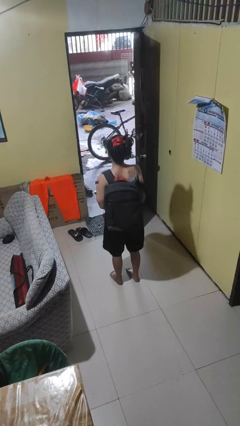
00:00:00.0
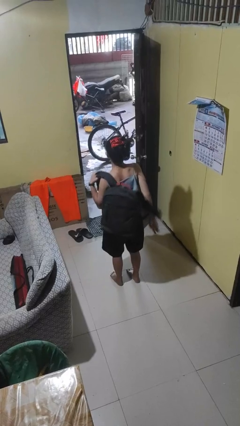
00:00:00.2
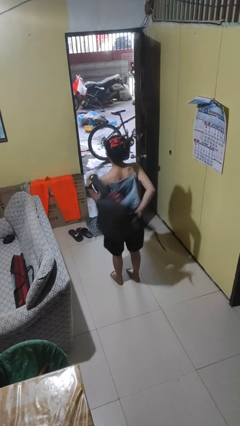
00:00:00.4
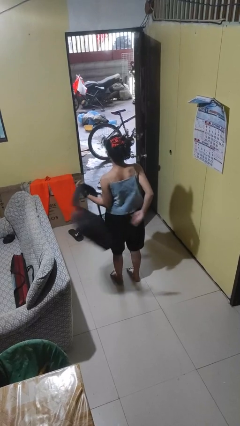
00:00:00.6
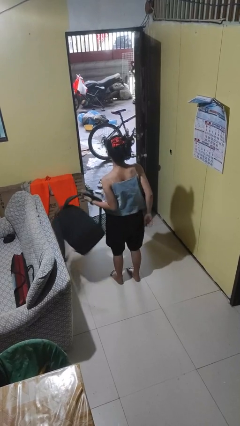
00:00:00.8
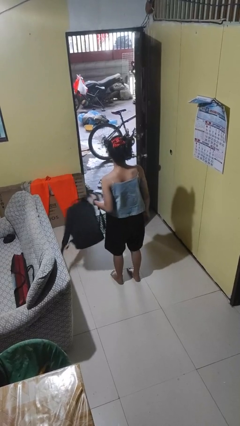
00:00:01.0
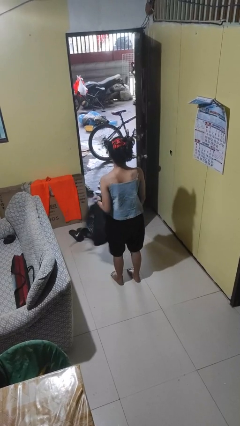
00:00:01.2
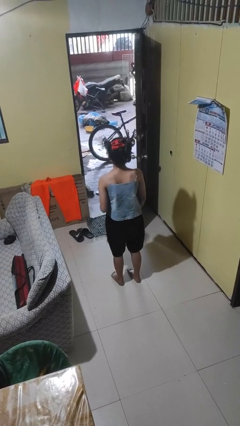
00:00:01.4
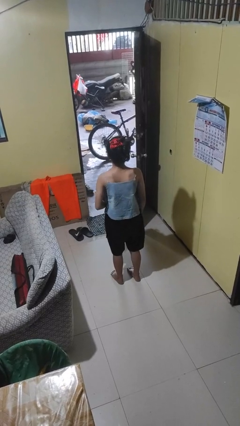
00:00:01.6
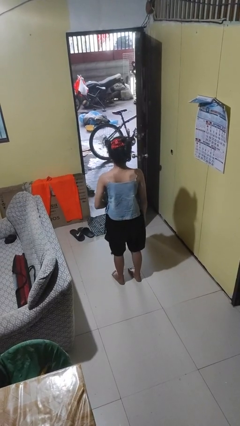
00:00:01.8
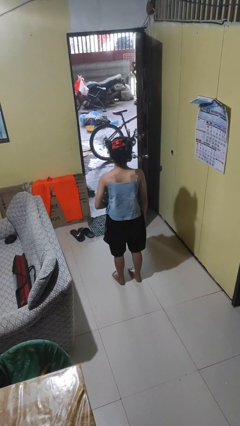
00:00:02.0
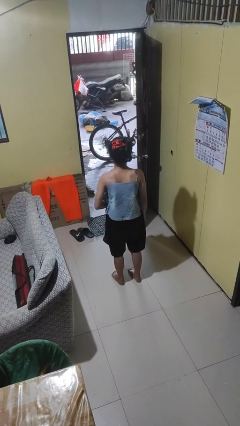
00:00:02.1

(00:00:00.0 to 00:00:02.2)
person takes off backpack

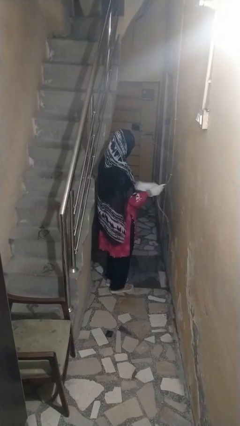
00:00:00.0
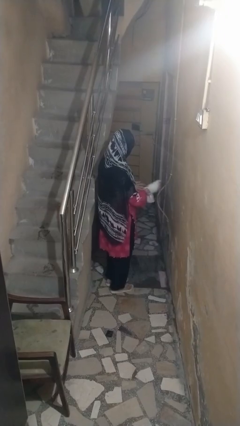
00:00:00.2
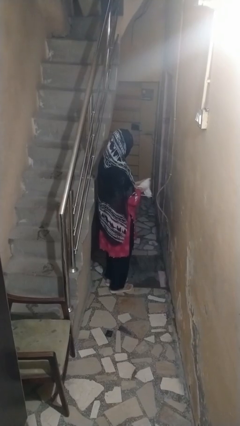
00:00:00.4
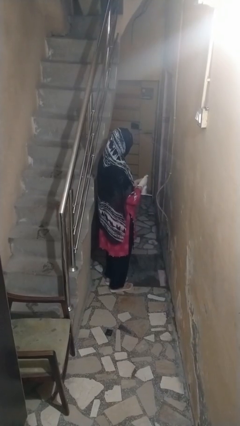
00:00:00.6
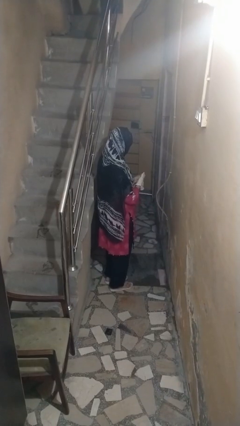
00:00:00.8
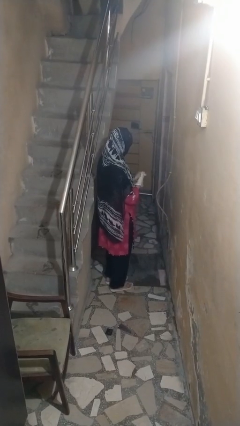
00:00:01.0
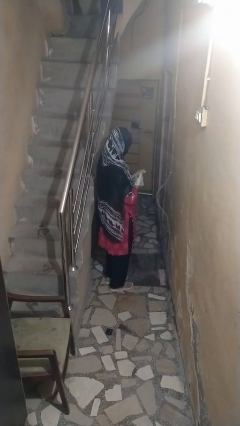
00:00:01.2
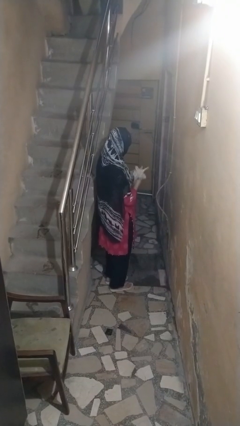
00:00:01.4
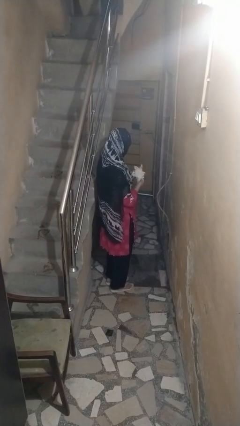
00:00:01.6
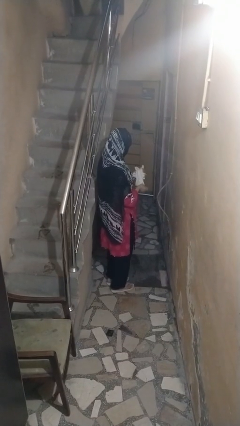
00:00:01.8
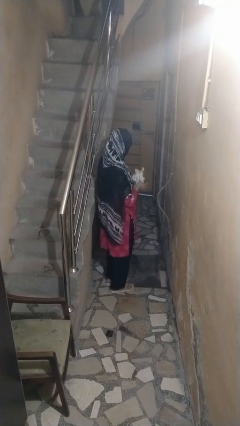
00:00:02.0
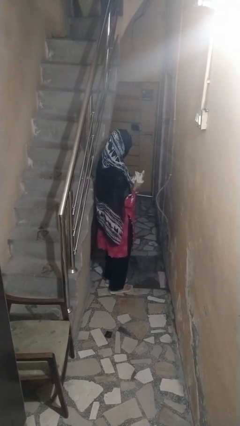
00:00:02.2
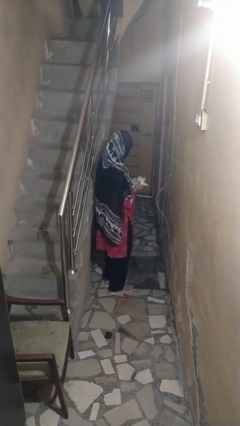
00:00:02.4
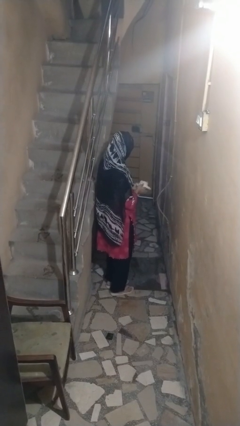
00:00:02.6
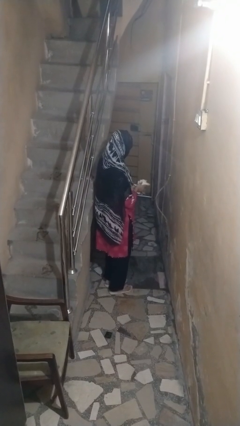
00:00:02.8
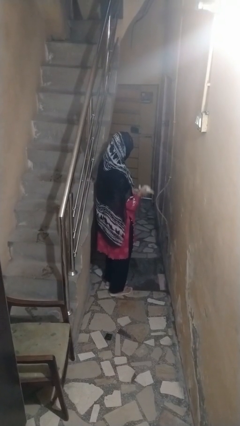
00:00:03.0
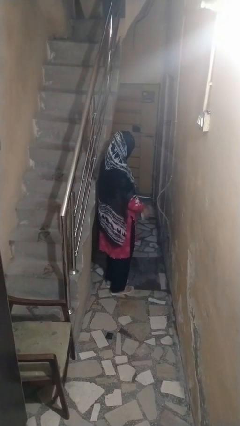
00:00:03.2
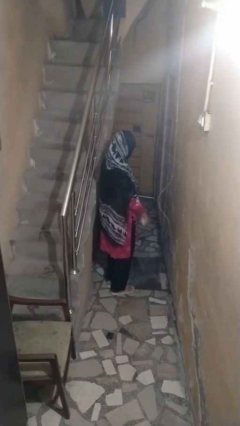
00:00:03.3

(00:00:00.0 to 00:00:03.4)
person takes off gloves

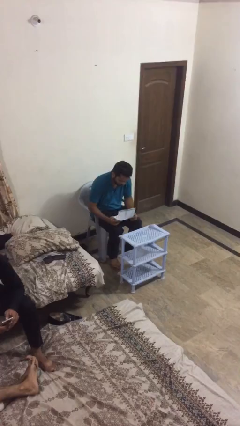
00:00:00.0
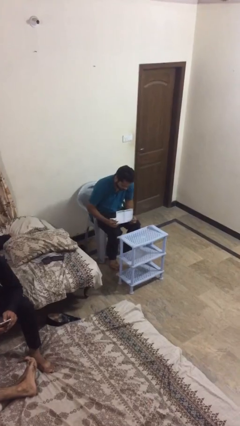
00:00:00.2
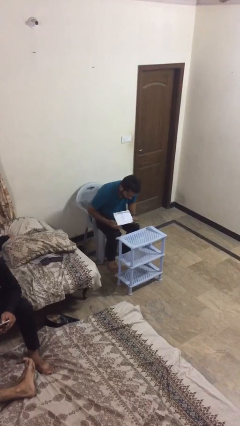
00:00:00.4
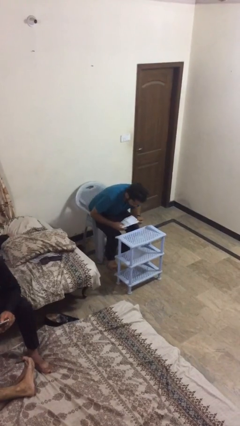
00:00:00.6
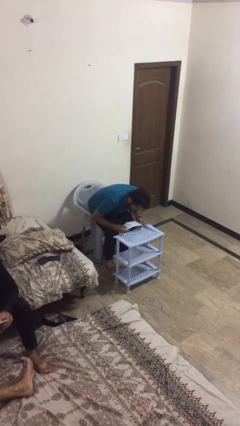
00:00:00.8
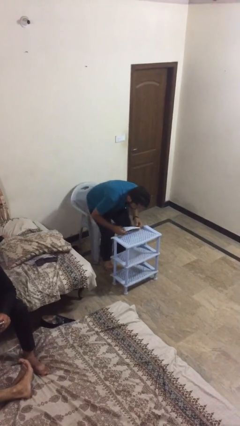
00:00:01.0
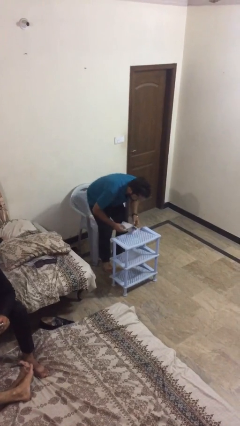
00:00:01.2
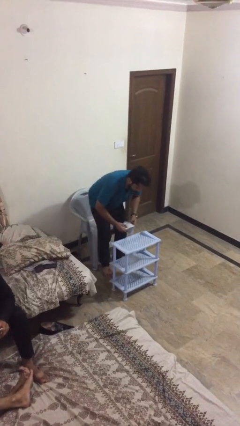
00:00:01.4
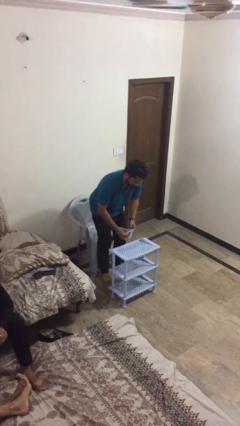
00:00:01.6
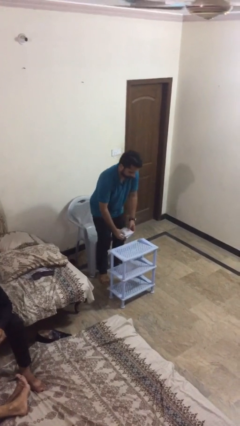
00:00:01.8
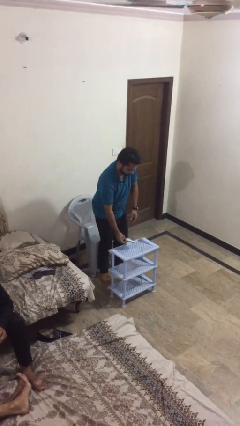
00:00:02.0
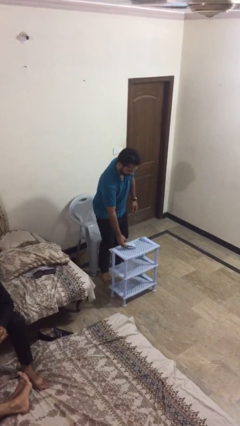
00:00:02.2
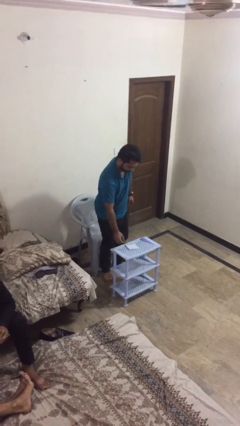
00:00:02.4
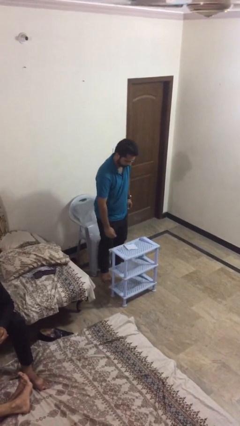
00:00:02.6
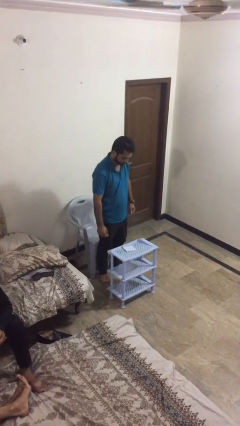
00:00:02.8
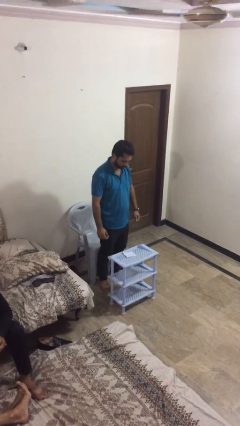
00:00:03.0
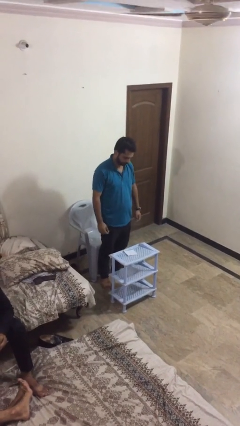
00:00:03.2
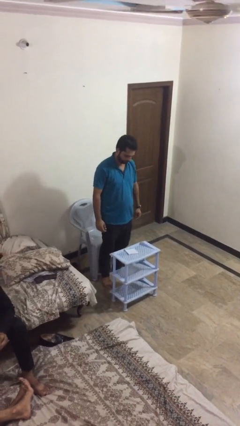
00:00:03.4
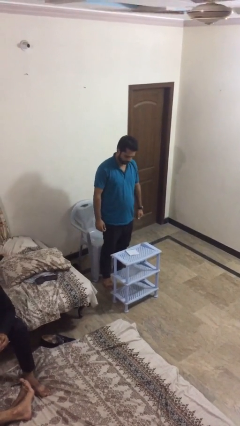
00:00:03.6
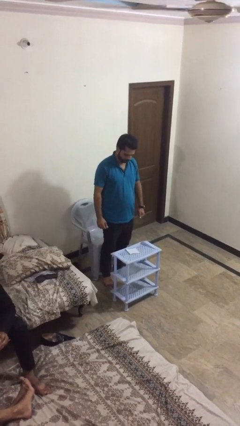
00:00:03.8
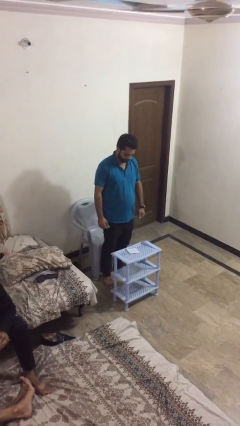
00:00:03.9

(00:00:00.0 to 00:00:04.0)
person stands up

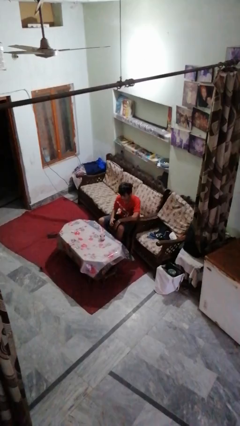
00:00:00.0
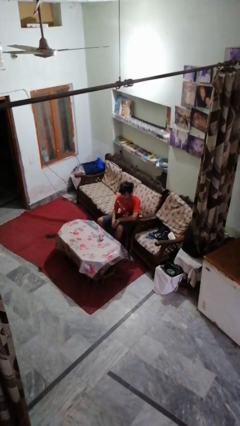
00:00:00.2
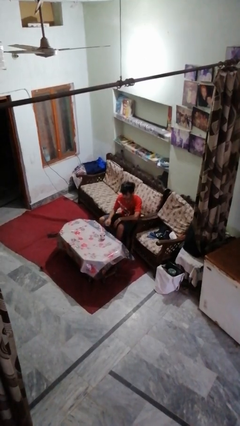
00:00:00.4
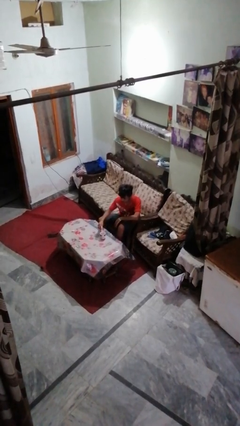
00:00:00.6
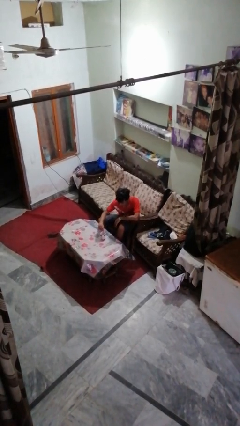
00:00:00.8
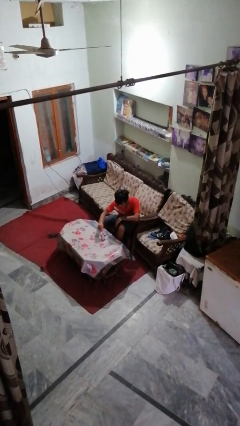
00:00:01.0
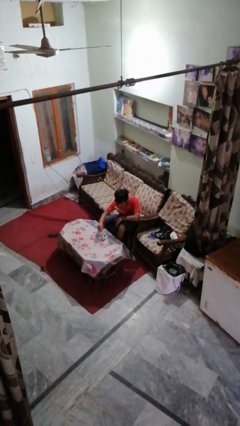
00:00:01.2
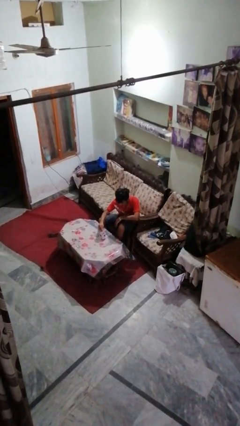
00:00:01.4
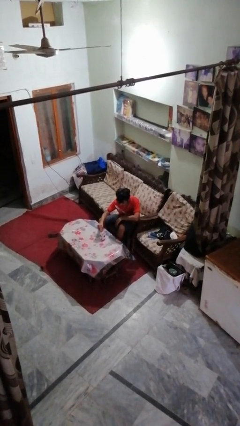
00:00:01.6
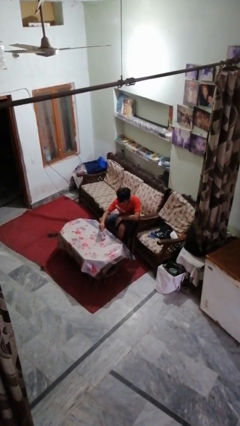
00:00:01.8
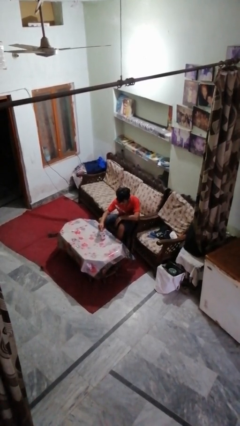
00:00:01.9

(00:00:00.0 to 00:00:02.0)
person stirs mug

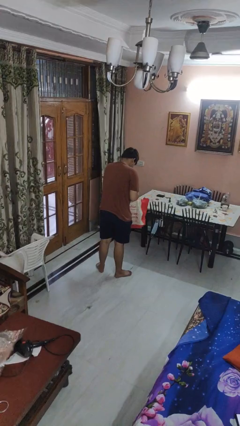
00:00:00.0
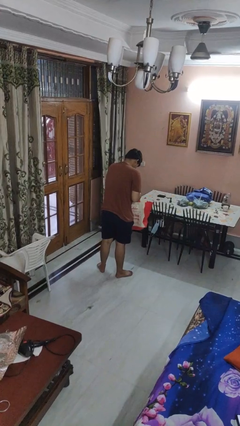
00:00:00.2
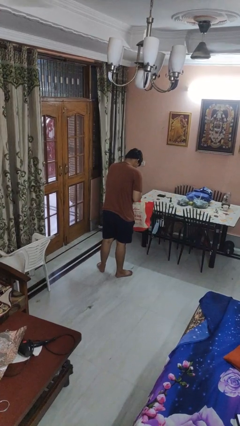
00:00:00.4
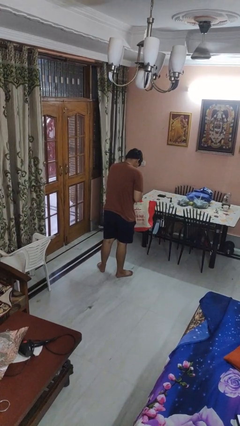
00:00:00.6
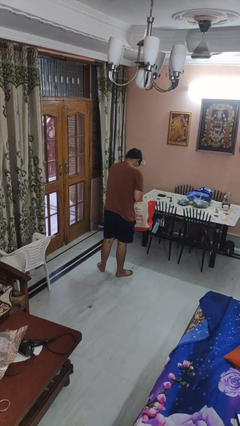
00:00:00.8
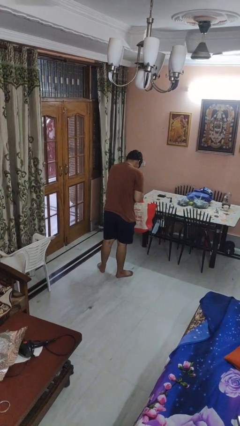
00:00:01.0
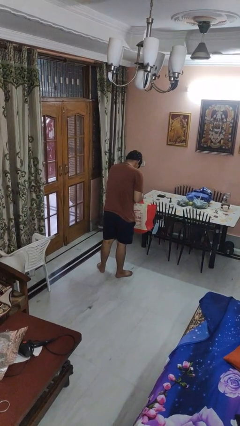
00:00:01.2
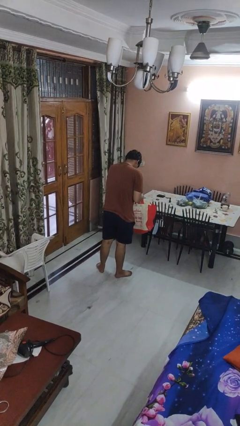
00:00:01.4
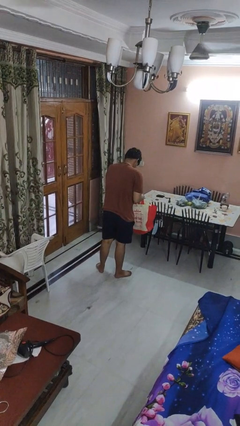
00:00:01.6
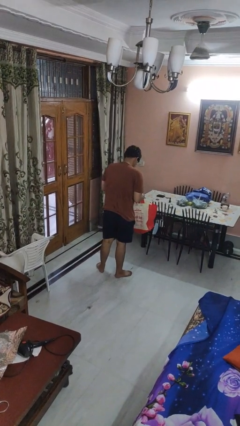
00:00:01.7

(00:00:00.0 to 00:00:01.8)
person searches in bag

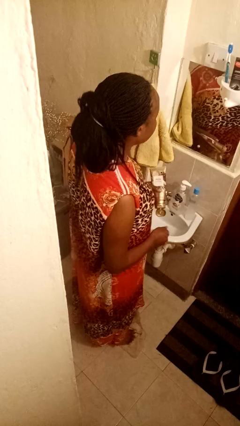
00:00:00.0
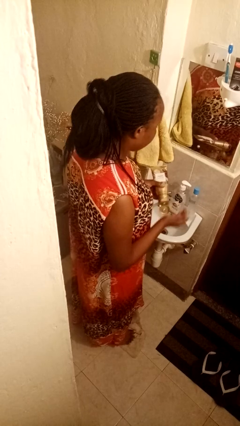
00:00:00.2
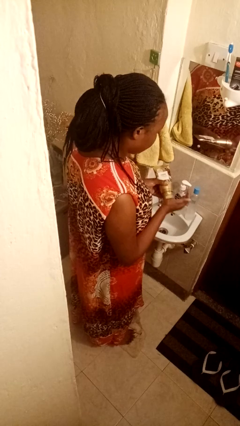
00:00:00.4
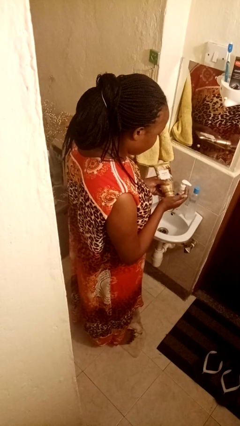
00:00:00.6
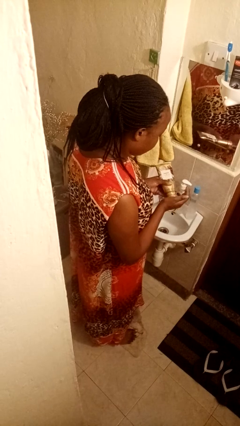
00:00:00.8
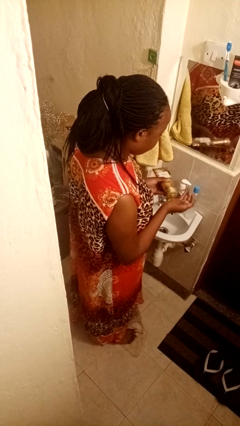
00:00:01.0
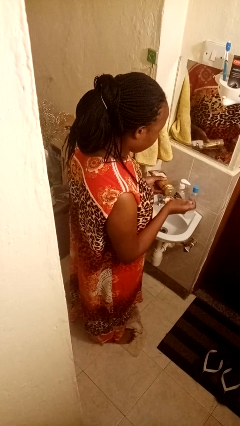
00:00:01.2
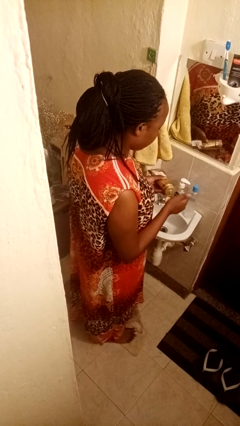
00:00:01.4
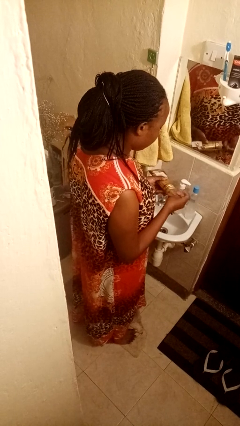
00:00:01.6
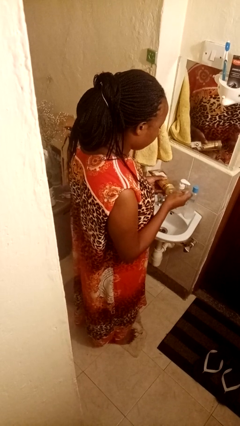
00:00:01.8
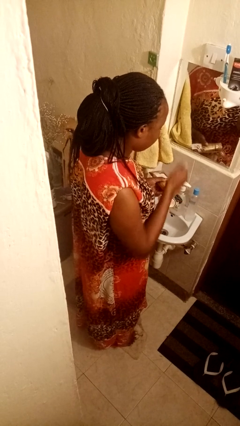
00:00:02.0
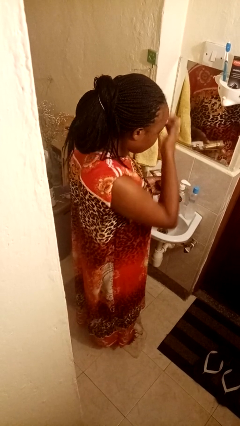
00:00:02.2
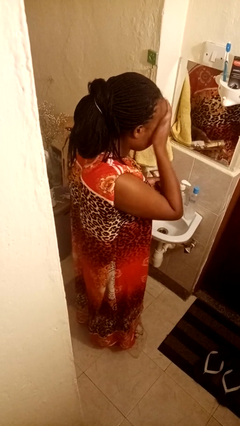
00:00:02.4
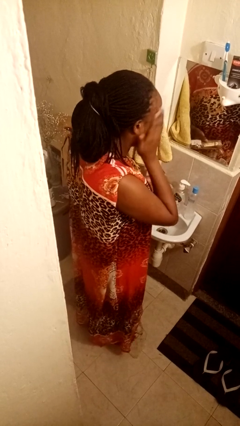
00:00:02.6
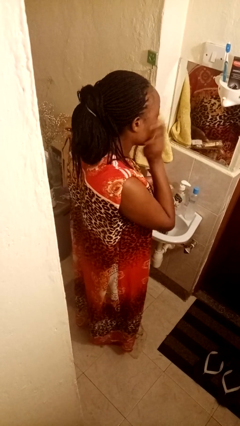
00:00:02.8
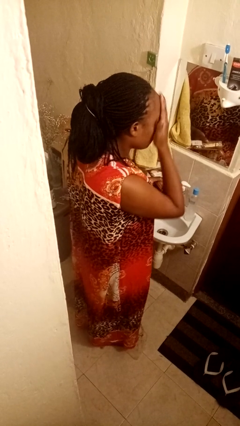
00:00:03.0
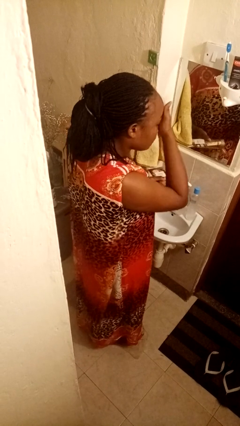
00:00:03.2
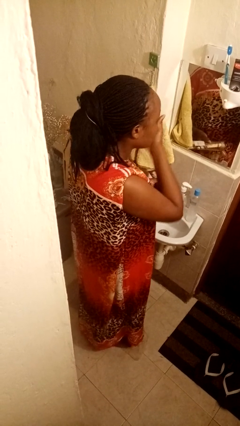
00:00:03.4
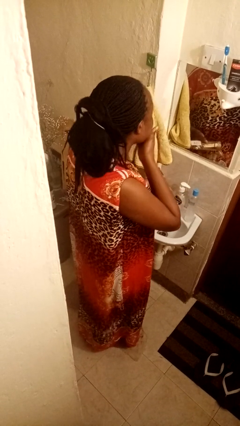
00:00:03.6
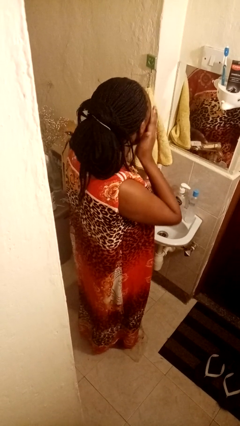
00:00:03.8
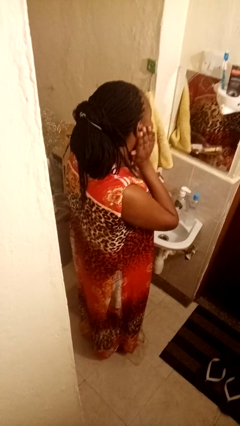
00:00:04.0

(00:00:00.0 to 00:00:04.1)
person applies facial moisturizer
